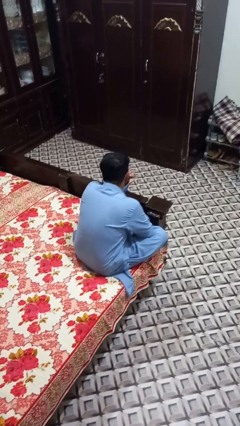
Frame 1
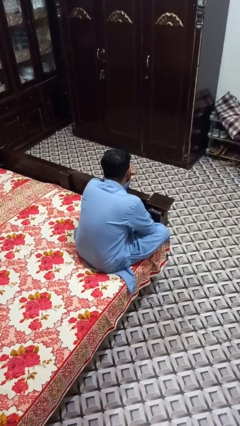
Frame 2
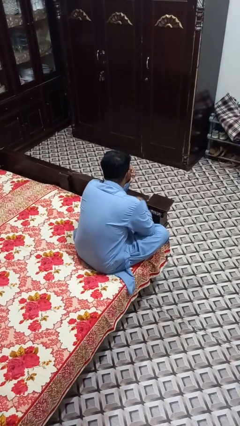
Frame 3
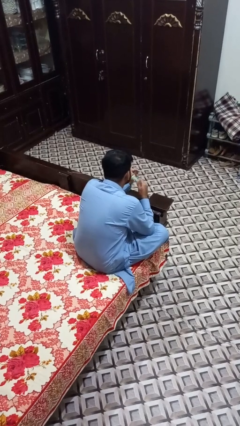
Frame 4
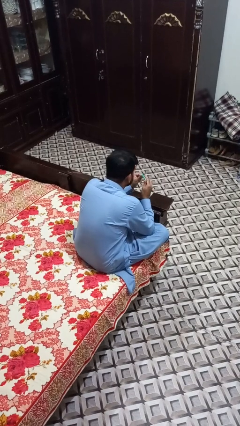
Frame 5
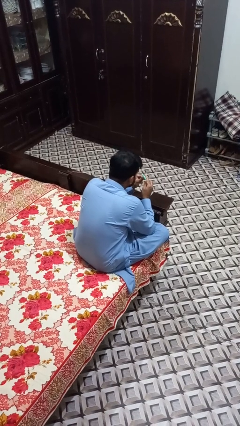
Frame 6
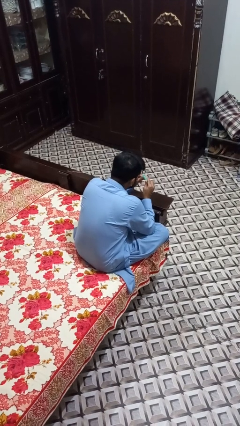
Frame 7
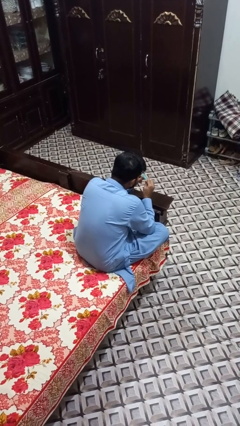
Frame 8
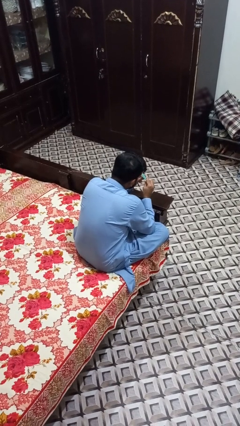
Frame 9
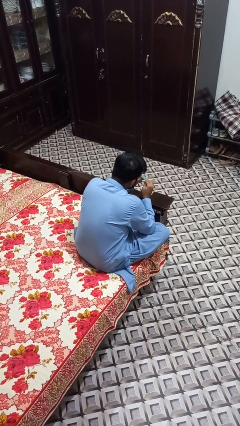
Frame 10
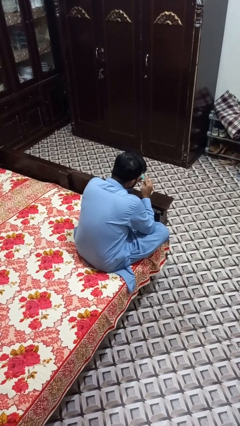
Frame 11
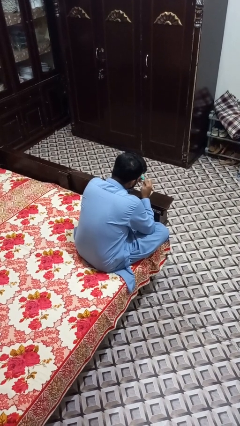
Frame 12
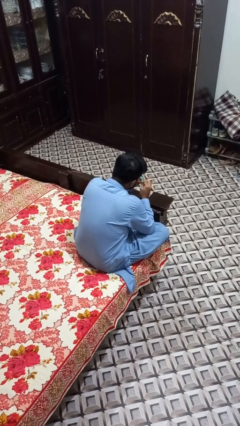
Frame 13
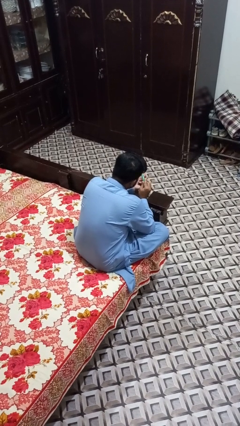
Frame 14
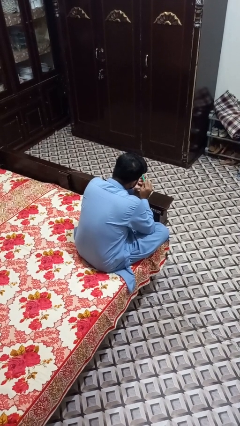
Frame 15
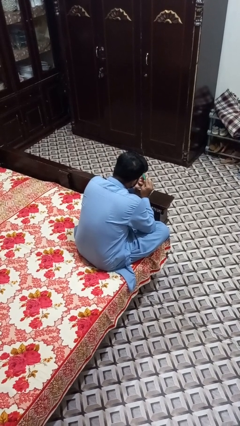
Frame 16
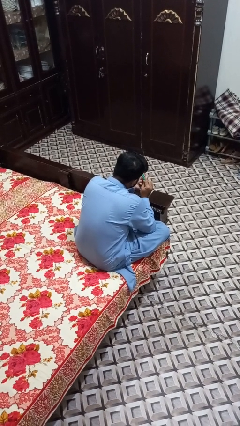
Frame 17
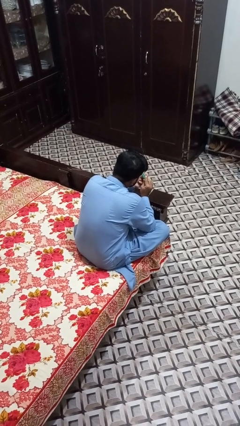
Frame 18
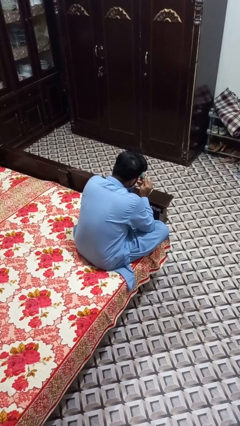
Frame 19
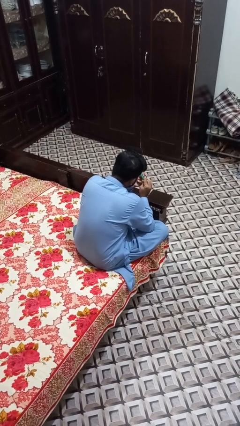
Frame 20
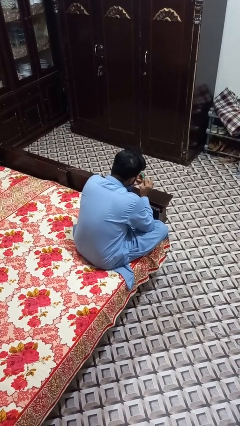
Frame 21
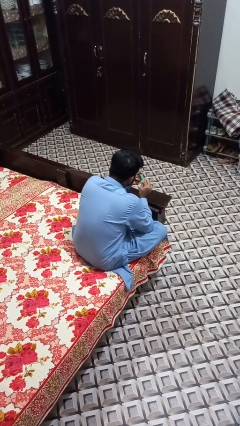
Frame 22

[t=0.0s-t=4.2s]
person files fingernails

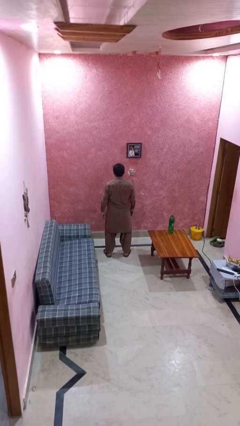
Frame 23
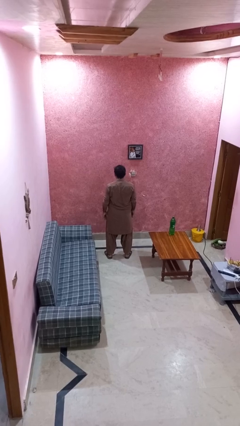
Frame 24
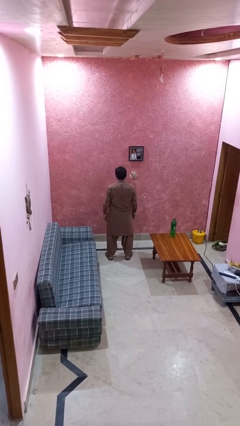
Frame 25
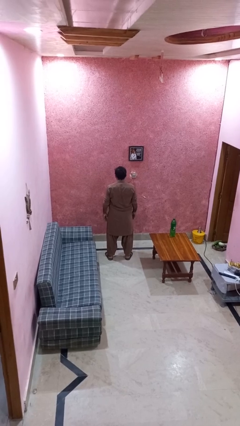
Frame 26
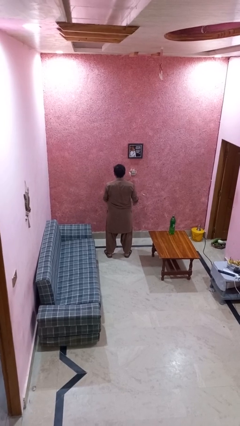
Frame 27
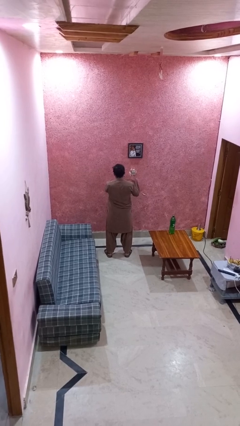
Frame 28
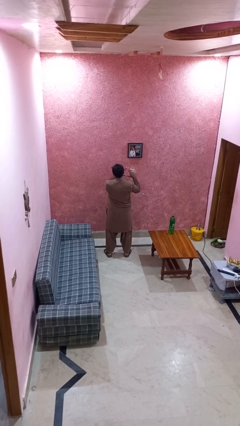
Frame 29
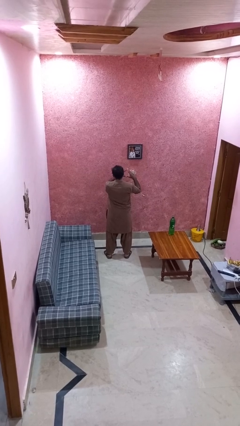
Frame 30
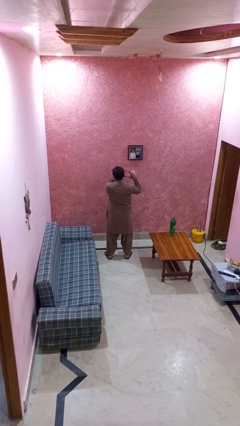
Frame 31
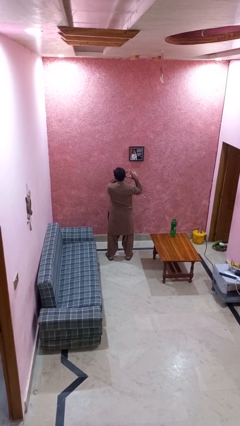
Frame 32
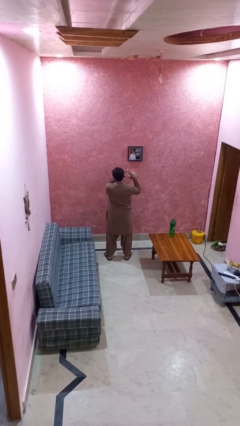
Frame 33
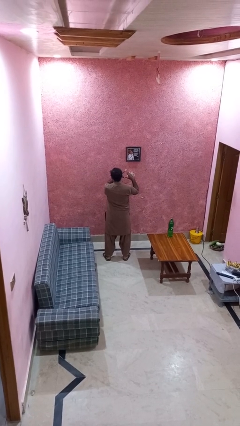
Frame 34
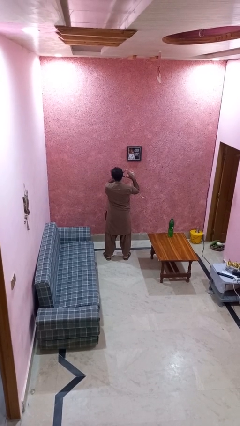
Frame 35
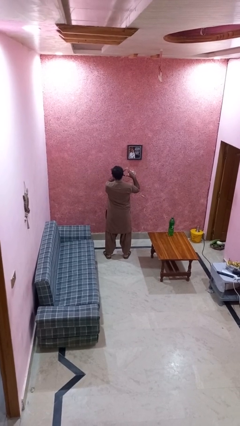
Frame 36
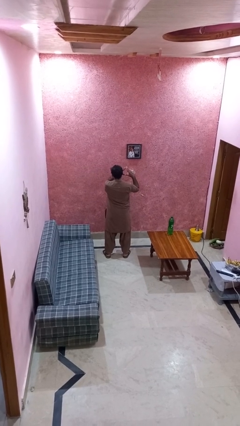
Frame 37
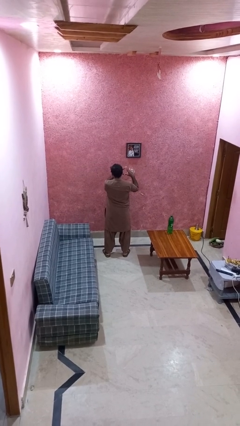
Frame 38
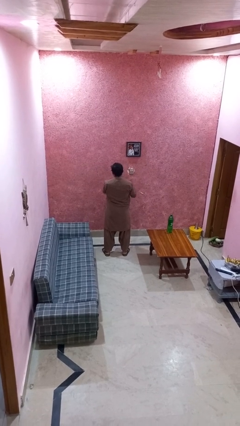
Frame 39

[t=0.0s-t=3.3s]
person gestures heart

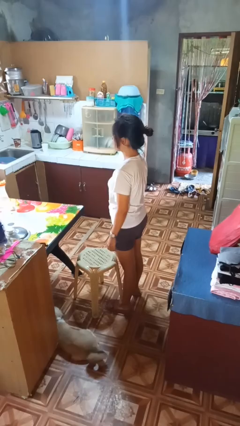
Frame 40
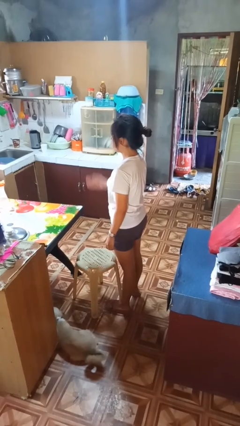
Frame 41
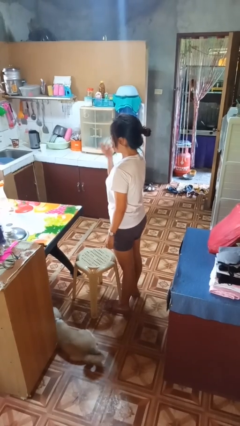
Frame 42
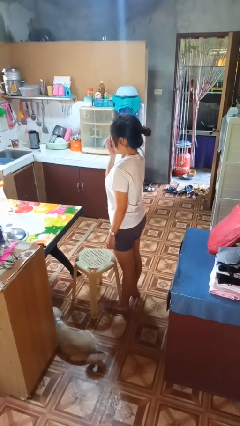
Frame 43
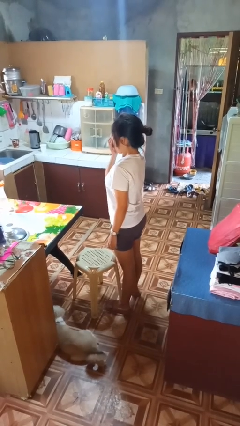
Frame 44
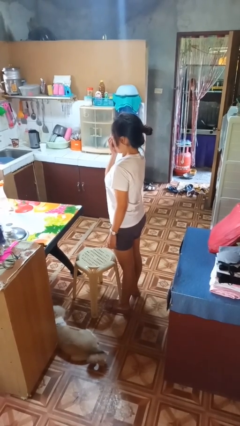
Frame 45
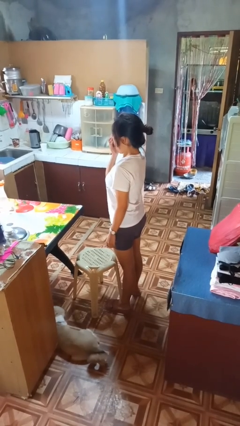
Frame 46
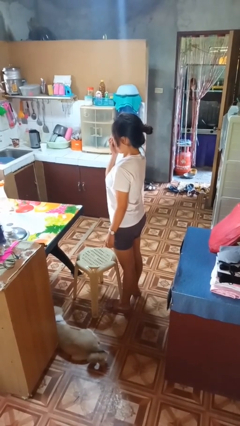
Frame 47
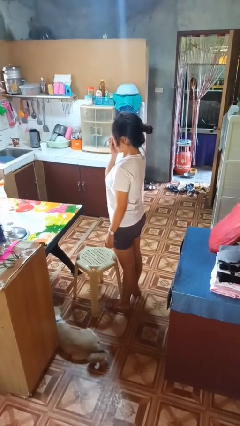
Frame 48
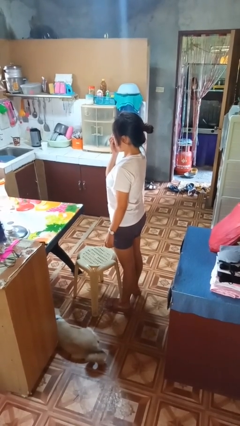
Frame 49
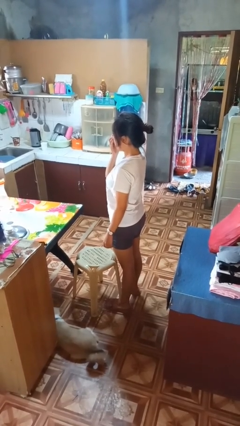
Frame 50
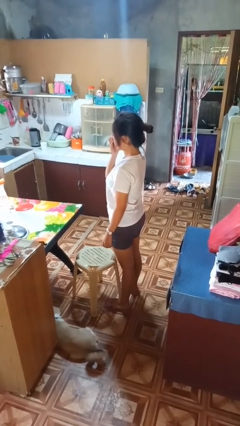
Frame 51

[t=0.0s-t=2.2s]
person yawns

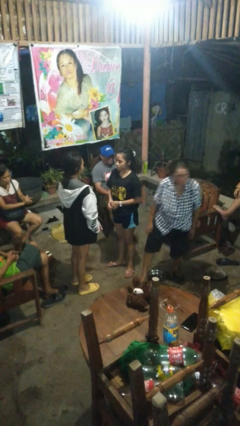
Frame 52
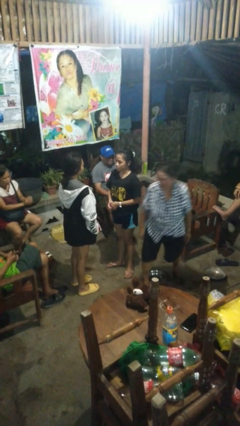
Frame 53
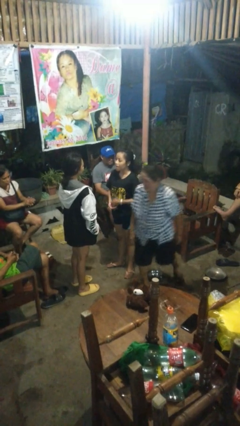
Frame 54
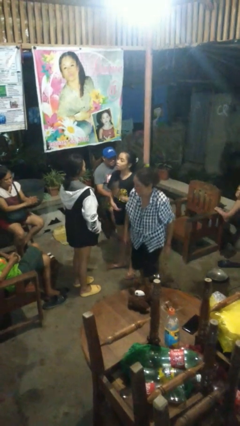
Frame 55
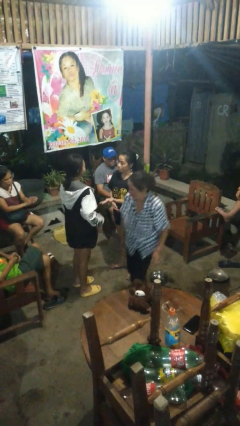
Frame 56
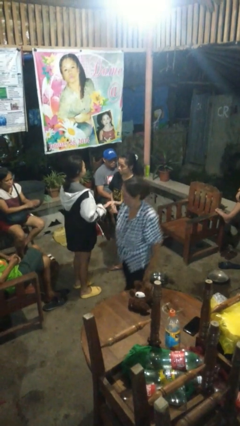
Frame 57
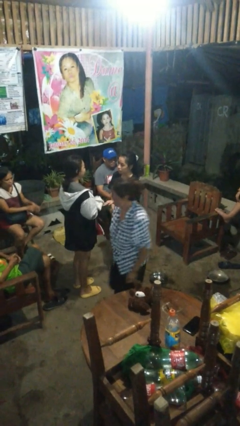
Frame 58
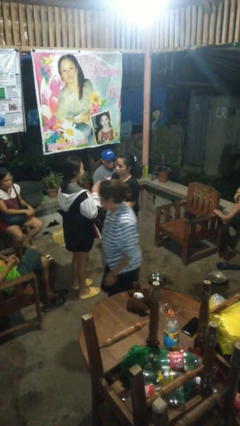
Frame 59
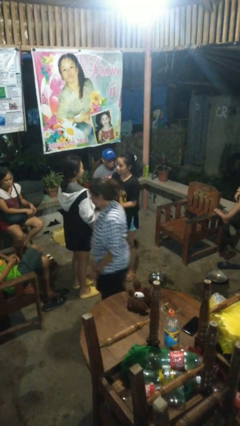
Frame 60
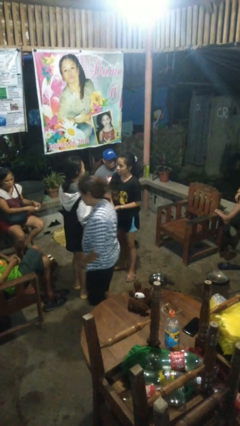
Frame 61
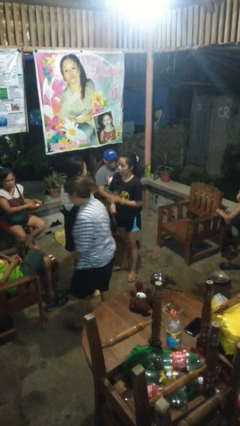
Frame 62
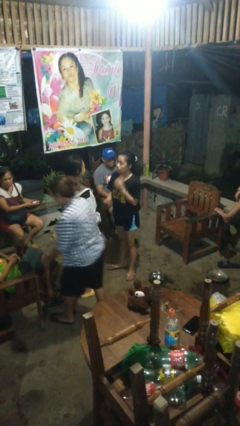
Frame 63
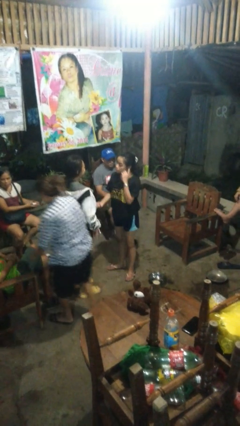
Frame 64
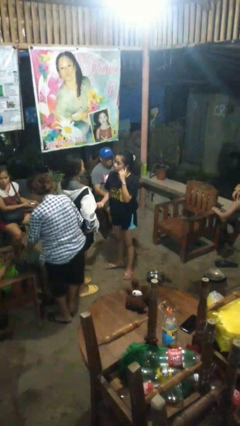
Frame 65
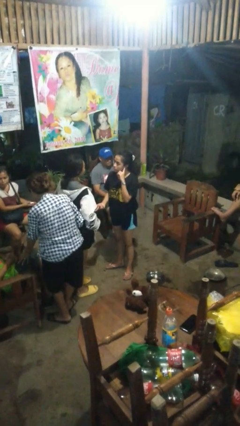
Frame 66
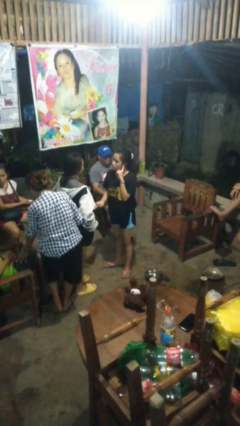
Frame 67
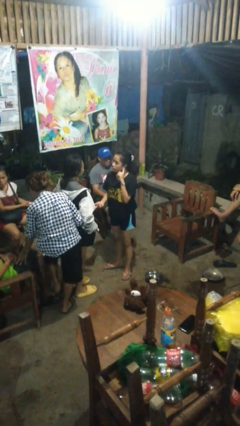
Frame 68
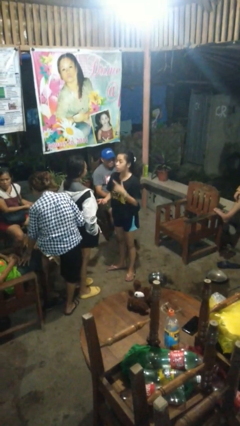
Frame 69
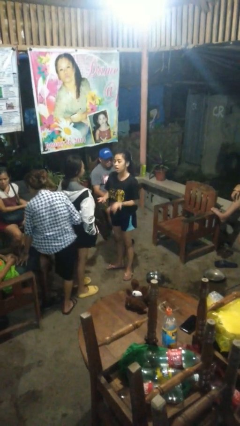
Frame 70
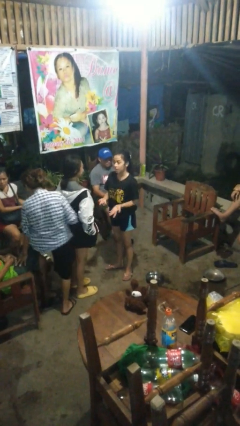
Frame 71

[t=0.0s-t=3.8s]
person talks to person

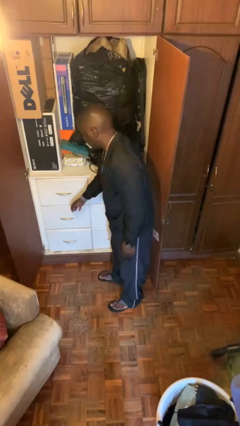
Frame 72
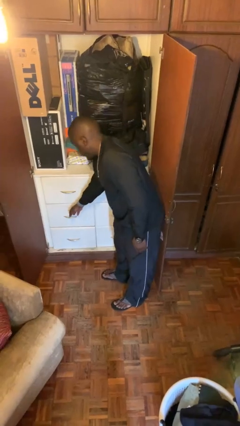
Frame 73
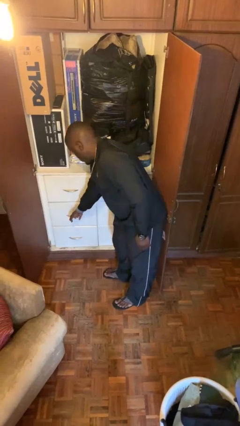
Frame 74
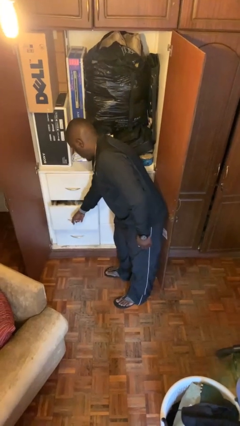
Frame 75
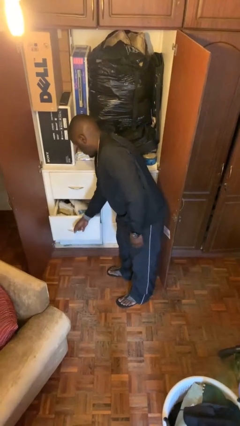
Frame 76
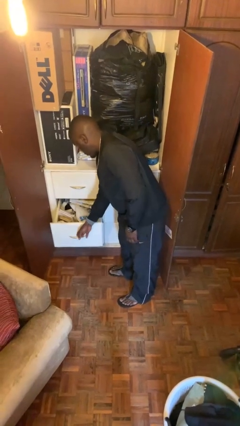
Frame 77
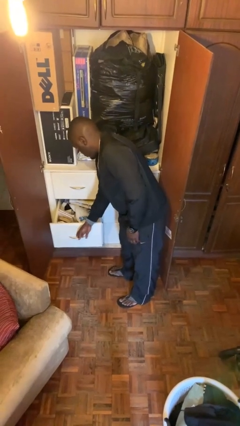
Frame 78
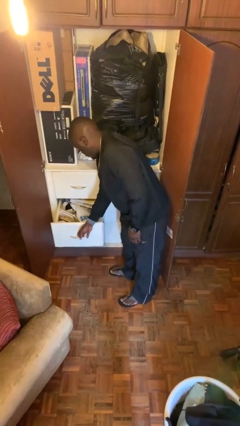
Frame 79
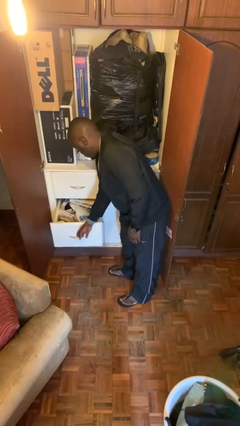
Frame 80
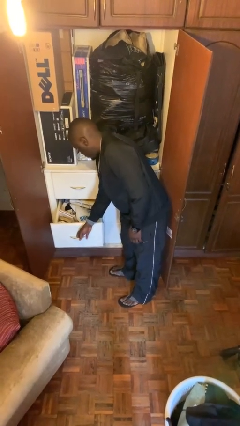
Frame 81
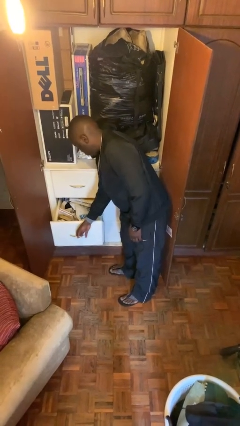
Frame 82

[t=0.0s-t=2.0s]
person opens dresser drawer

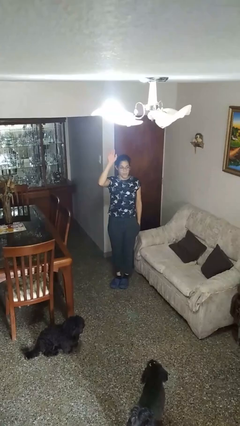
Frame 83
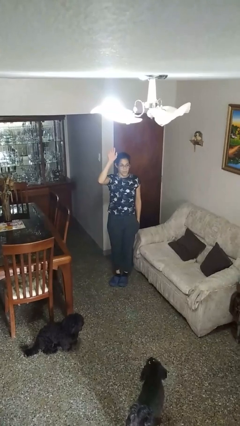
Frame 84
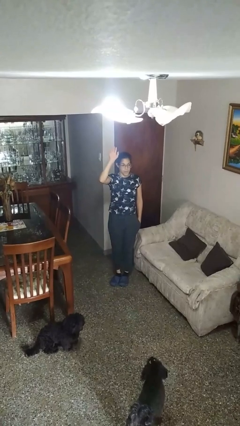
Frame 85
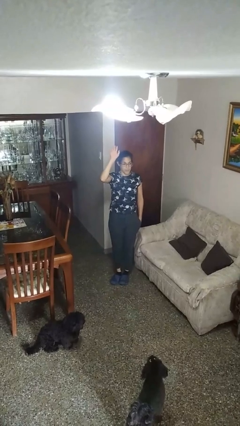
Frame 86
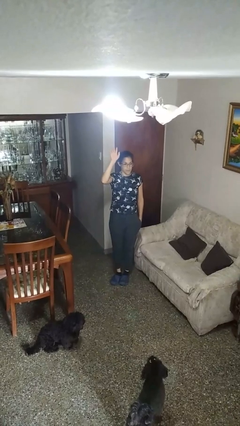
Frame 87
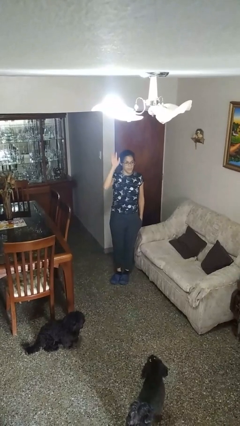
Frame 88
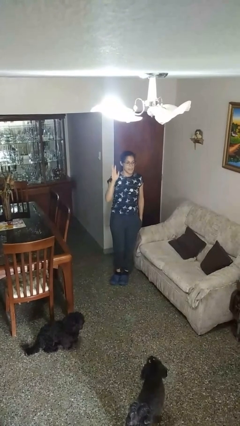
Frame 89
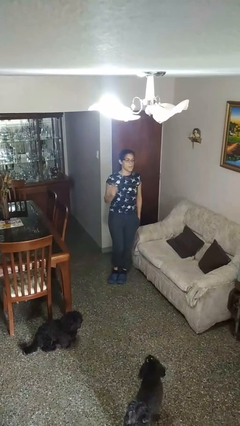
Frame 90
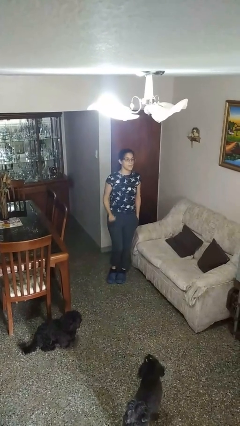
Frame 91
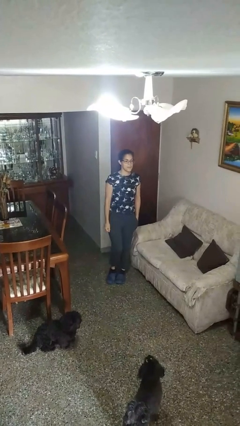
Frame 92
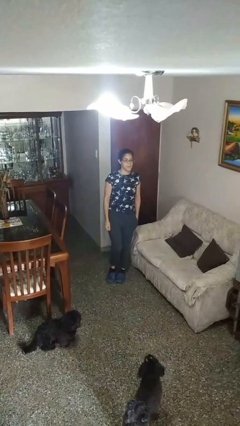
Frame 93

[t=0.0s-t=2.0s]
person gestures raise hand
